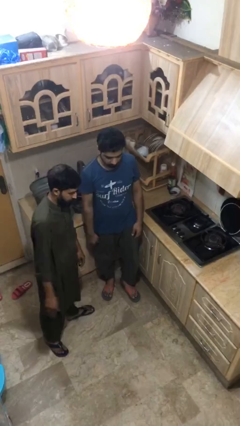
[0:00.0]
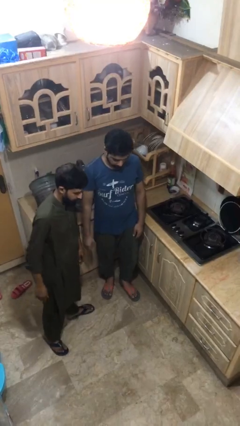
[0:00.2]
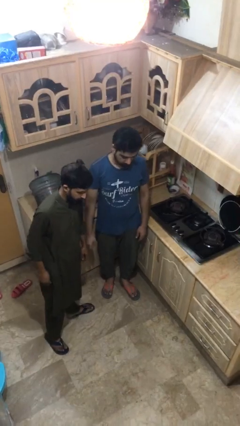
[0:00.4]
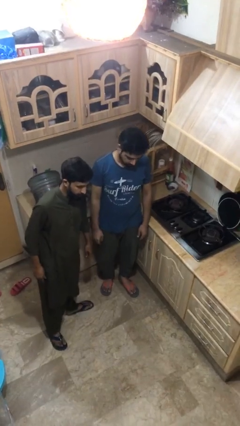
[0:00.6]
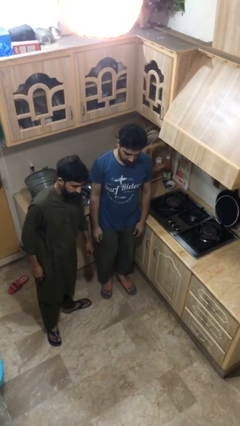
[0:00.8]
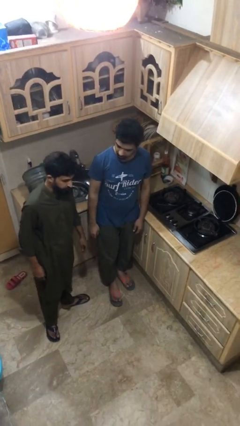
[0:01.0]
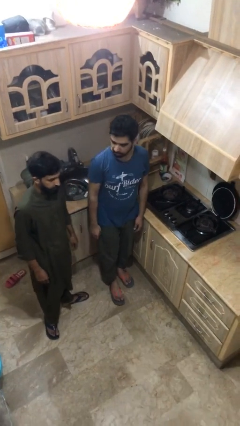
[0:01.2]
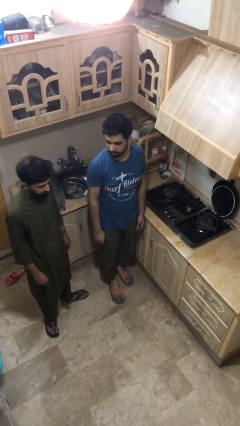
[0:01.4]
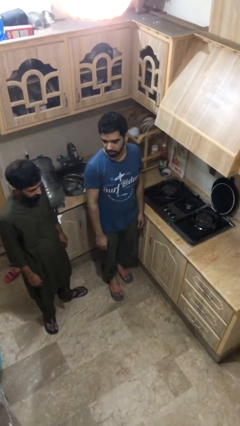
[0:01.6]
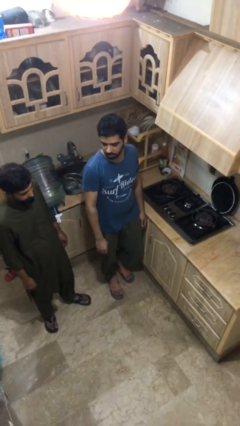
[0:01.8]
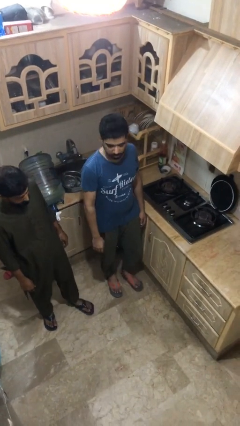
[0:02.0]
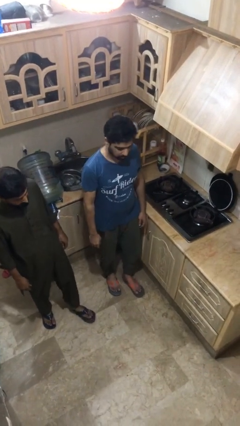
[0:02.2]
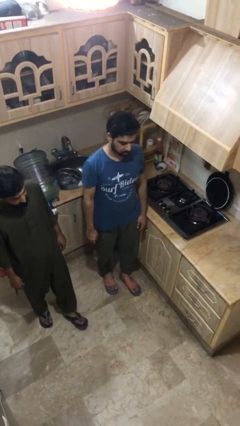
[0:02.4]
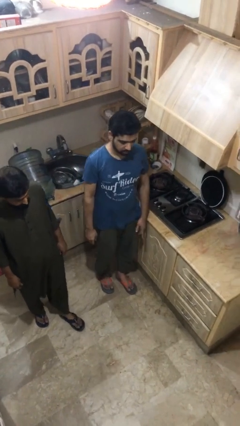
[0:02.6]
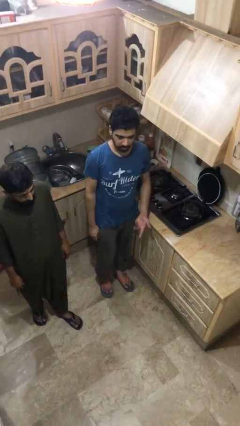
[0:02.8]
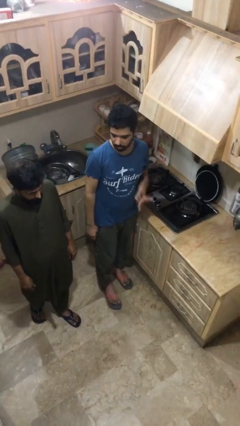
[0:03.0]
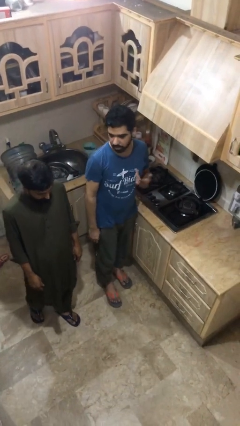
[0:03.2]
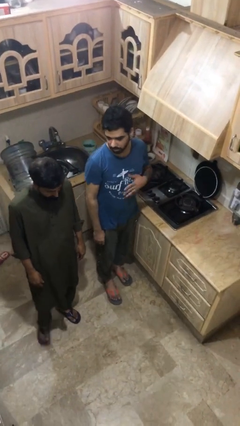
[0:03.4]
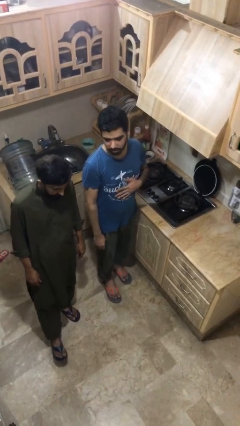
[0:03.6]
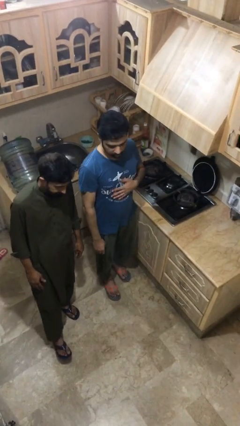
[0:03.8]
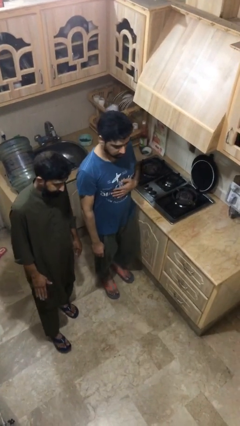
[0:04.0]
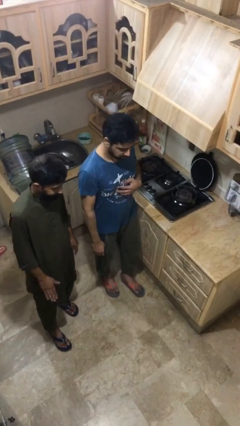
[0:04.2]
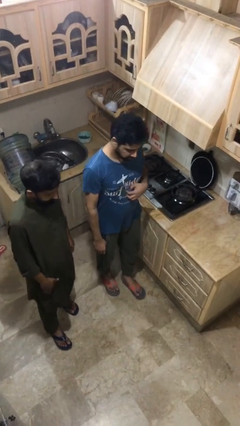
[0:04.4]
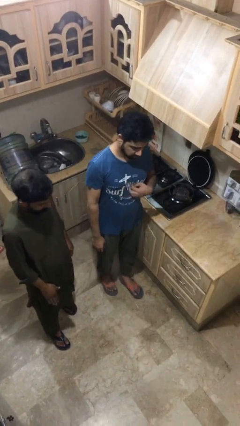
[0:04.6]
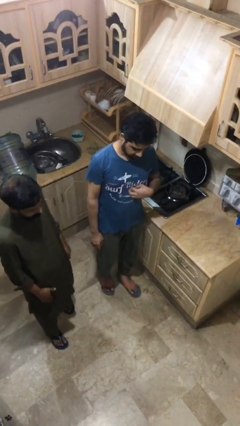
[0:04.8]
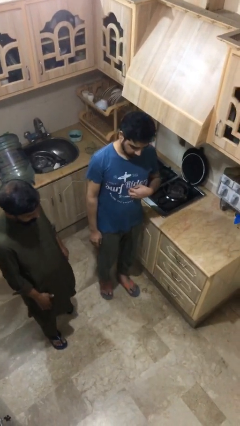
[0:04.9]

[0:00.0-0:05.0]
person talks to person

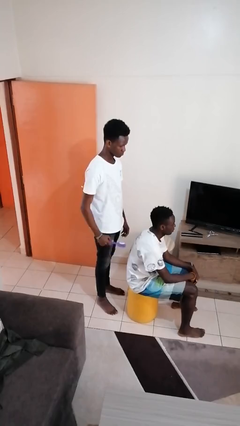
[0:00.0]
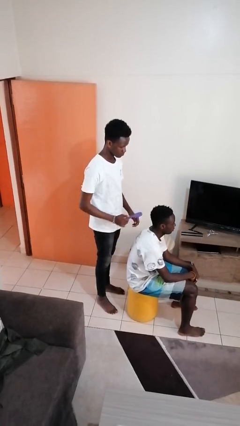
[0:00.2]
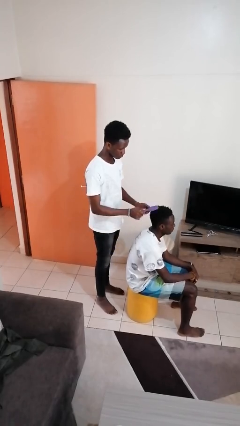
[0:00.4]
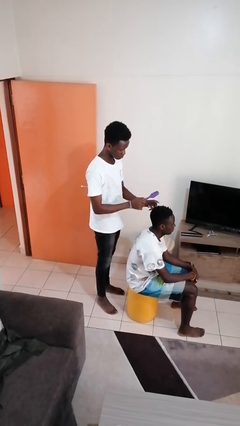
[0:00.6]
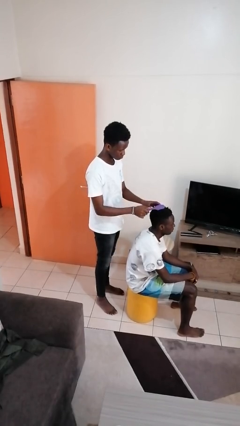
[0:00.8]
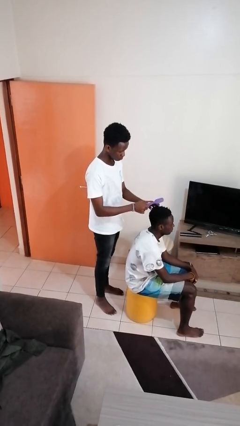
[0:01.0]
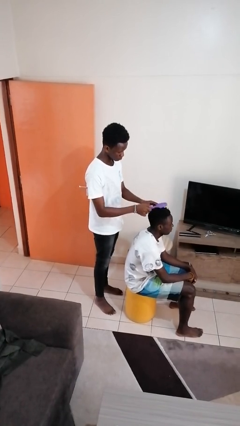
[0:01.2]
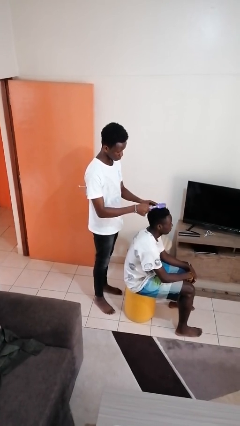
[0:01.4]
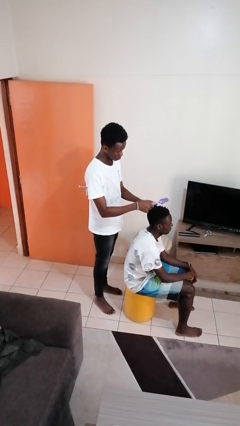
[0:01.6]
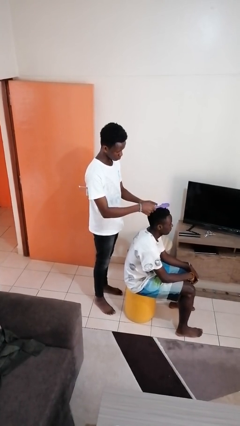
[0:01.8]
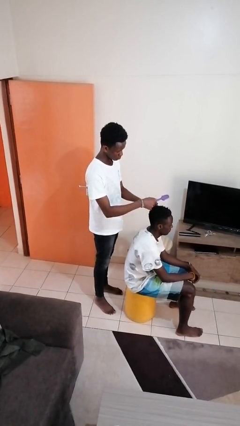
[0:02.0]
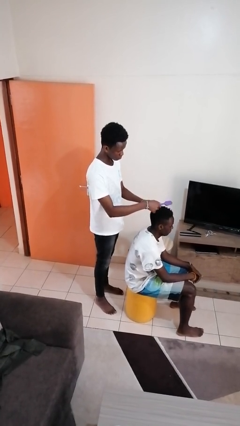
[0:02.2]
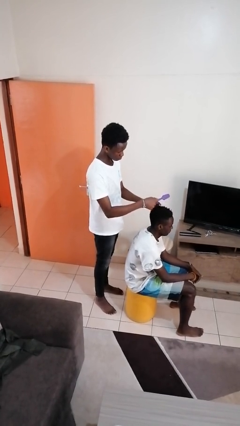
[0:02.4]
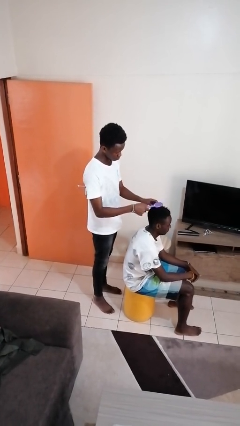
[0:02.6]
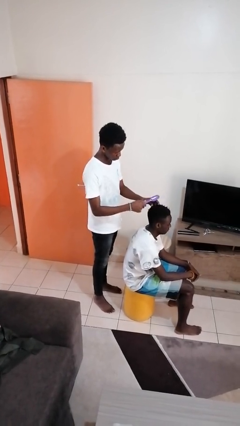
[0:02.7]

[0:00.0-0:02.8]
person brushes hair of person

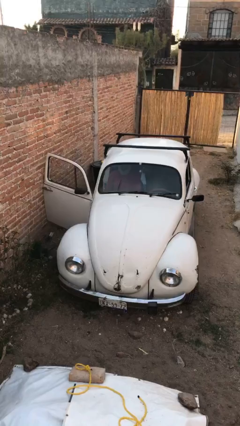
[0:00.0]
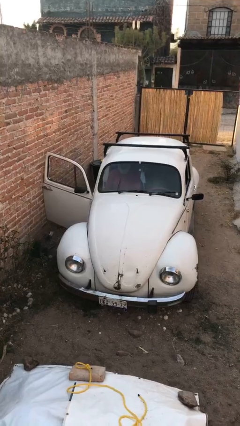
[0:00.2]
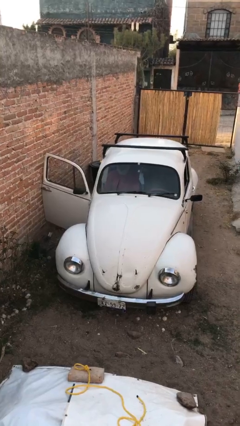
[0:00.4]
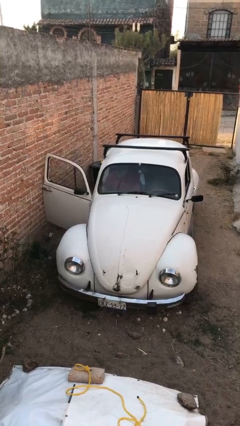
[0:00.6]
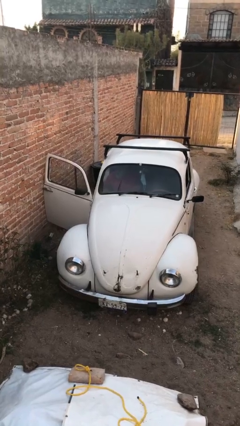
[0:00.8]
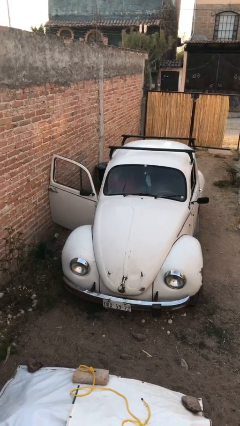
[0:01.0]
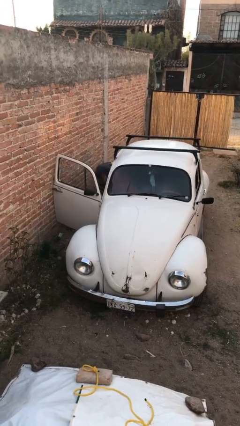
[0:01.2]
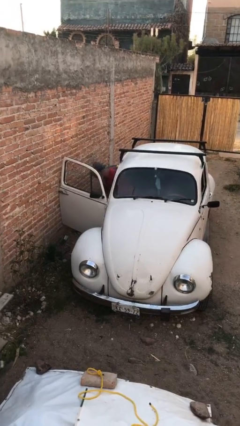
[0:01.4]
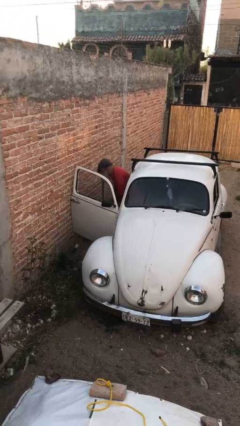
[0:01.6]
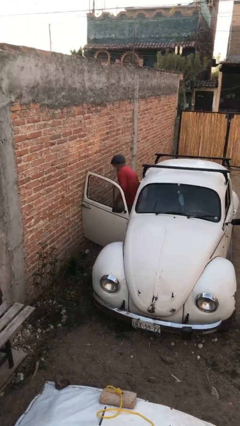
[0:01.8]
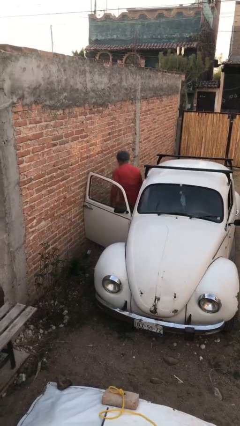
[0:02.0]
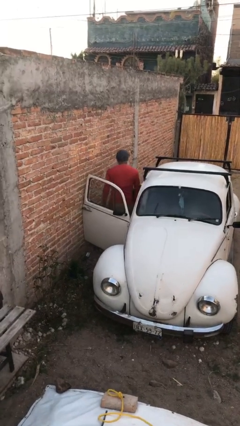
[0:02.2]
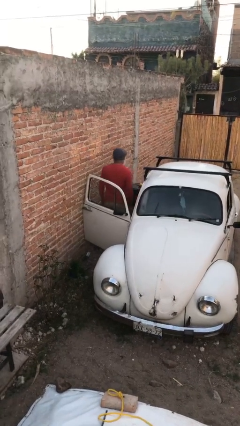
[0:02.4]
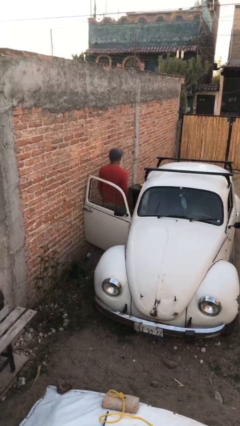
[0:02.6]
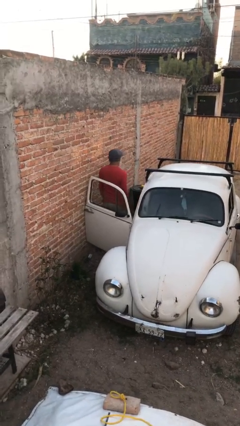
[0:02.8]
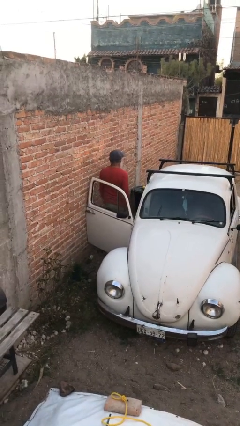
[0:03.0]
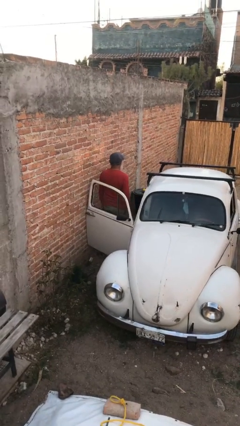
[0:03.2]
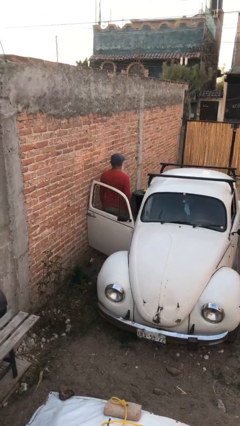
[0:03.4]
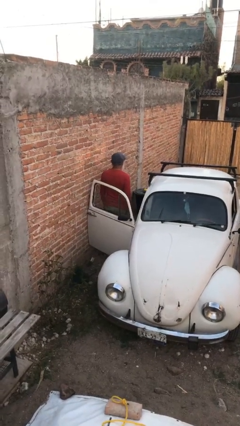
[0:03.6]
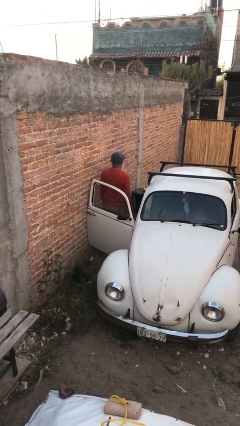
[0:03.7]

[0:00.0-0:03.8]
person exits car

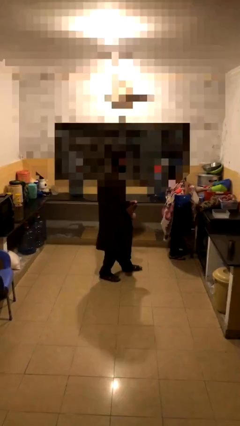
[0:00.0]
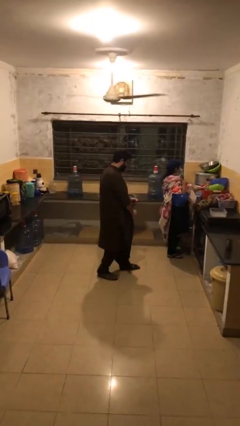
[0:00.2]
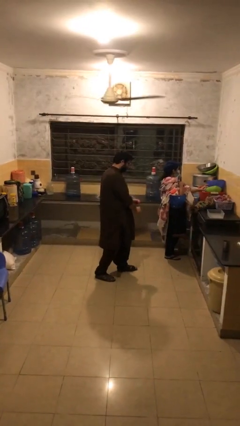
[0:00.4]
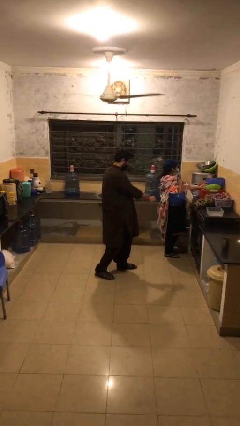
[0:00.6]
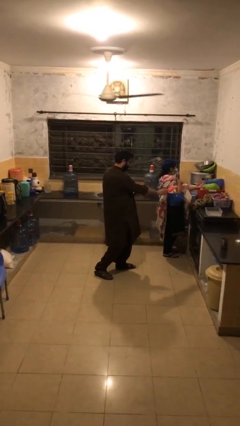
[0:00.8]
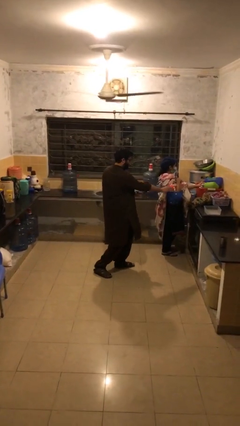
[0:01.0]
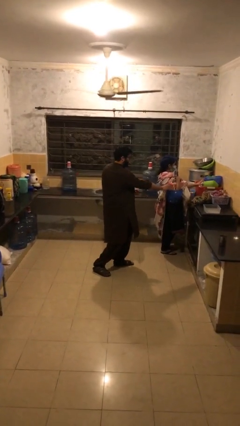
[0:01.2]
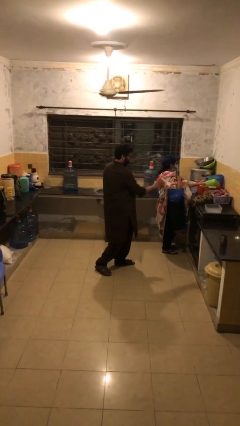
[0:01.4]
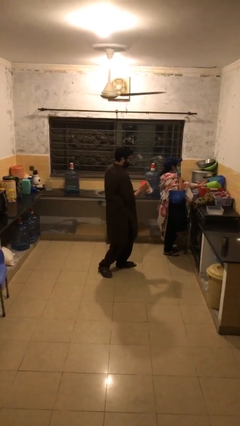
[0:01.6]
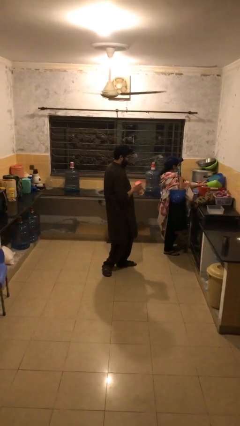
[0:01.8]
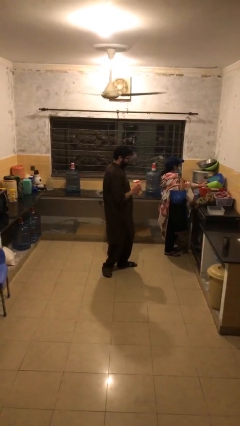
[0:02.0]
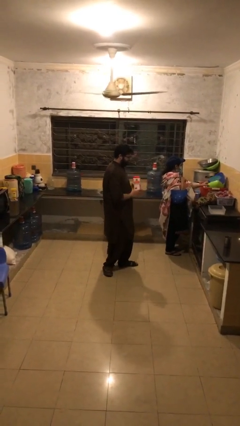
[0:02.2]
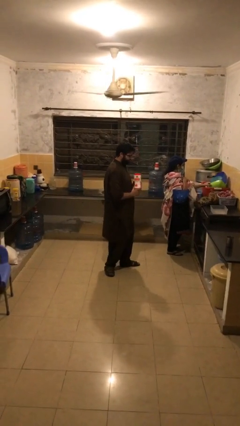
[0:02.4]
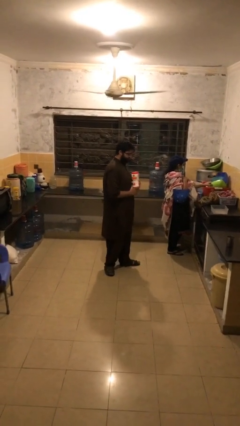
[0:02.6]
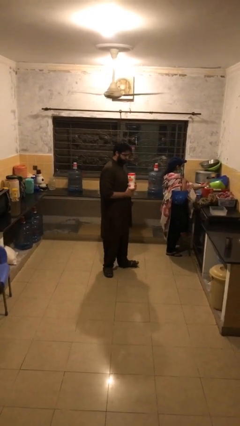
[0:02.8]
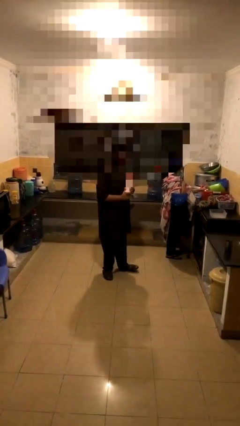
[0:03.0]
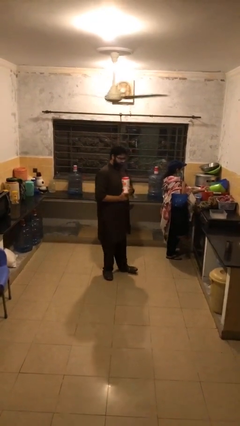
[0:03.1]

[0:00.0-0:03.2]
person steals object from person

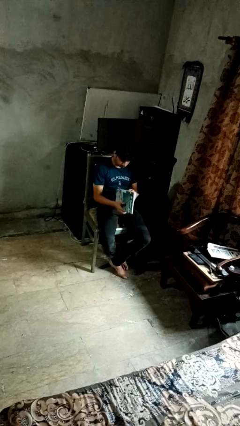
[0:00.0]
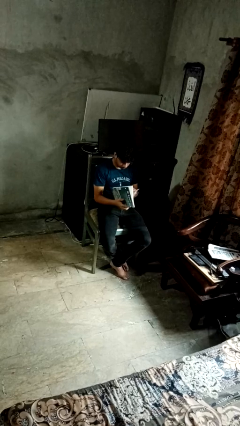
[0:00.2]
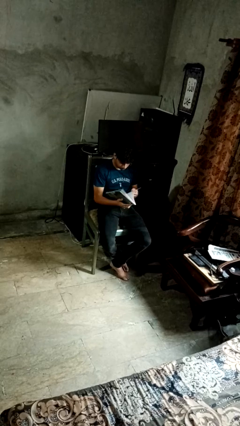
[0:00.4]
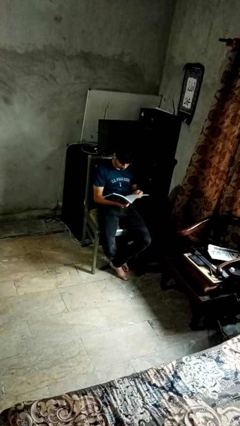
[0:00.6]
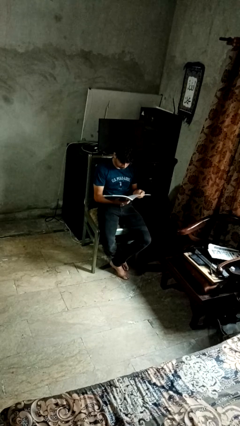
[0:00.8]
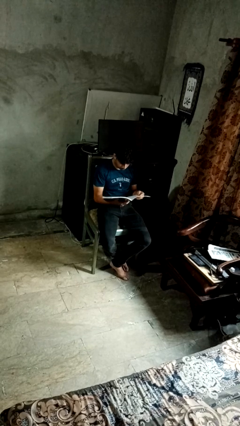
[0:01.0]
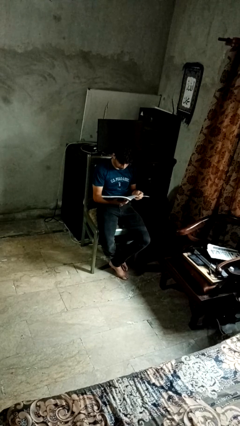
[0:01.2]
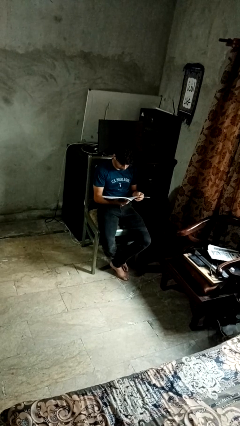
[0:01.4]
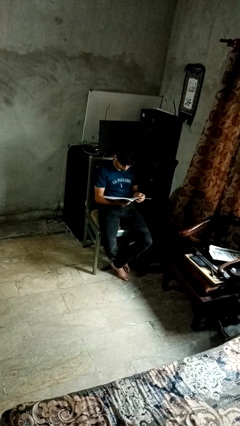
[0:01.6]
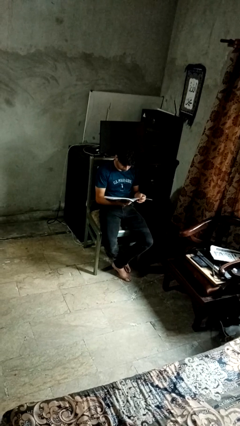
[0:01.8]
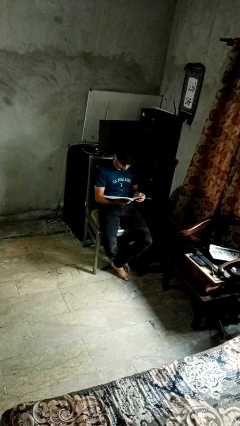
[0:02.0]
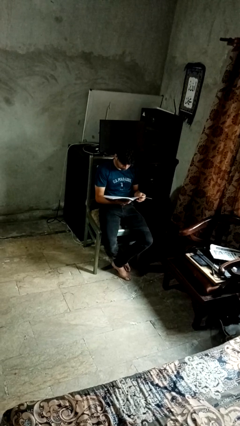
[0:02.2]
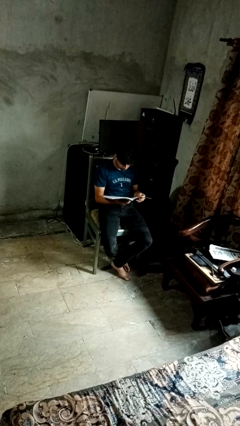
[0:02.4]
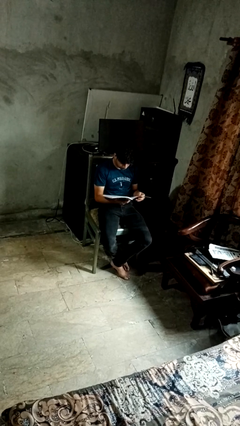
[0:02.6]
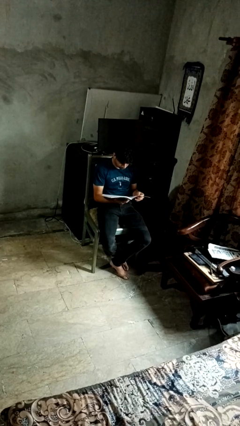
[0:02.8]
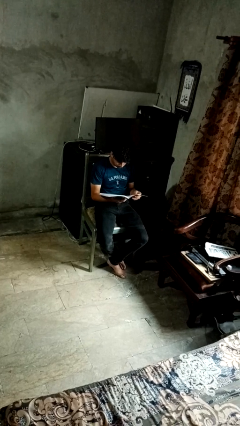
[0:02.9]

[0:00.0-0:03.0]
person reads book

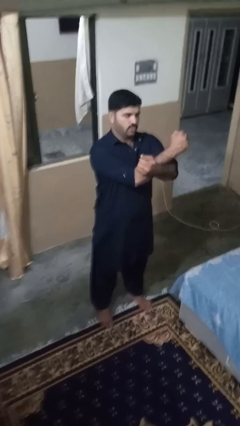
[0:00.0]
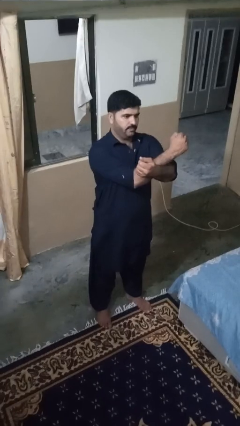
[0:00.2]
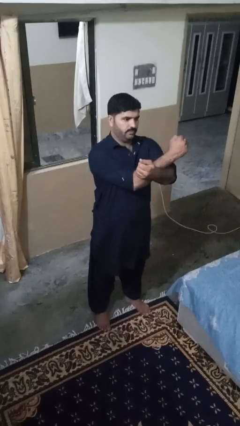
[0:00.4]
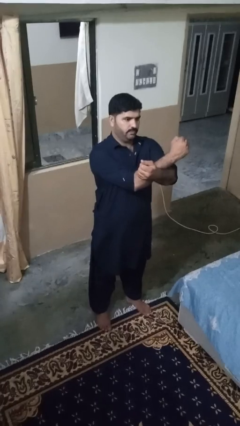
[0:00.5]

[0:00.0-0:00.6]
person crosses arms
